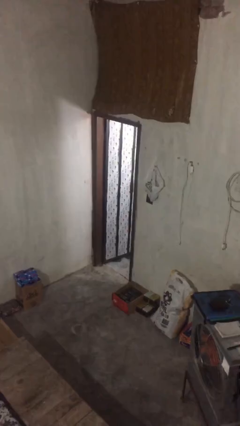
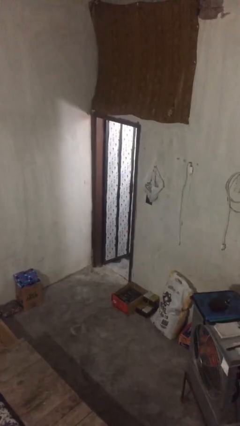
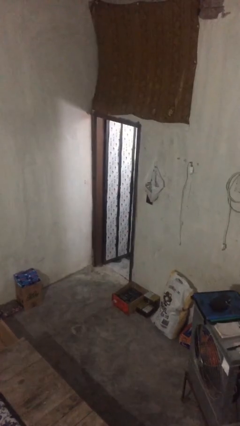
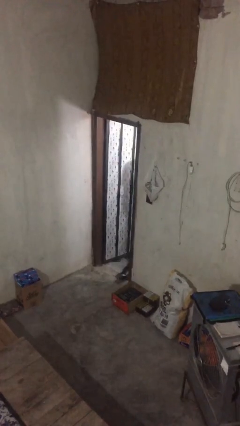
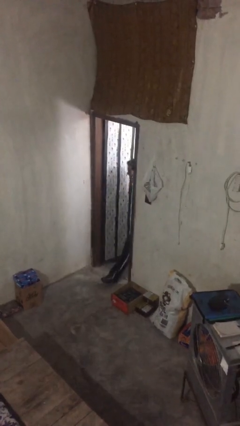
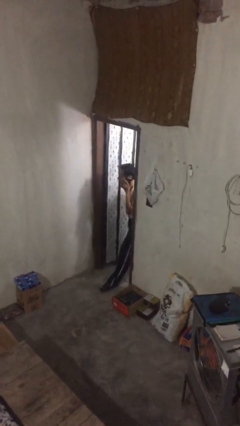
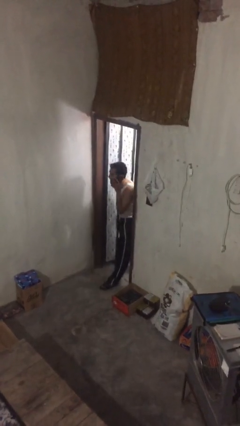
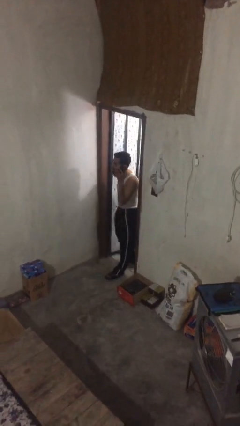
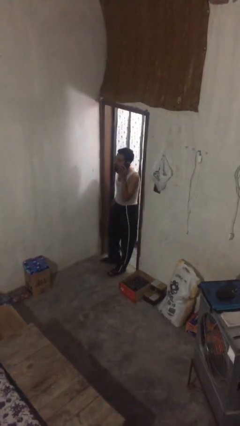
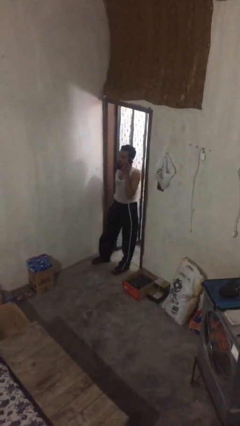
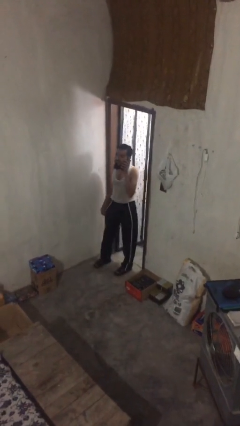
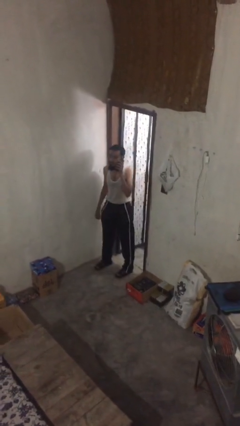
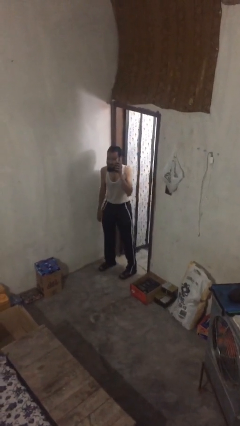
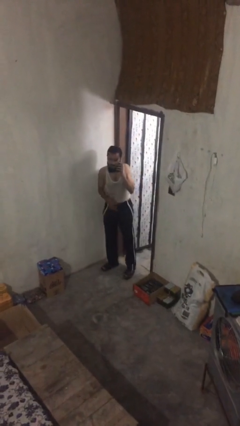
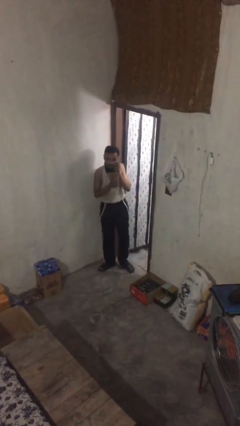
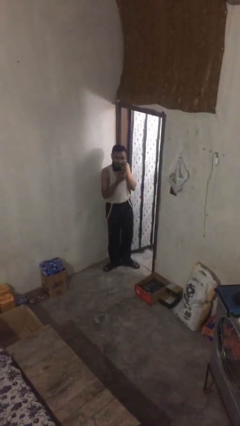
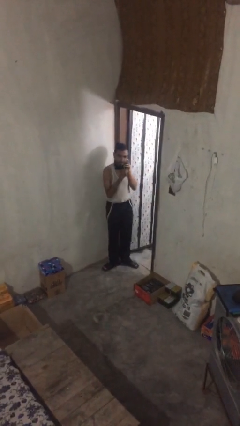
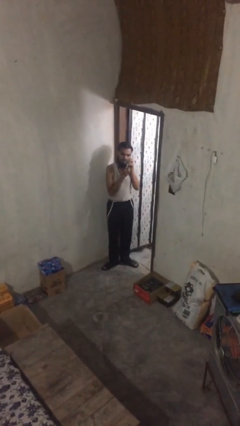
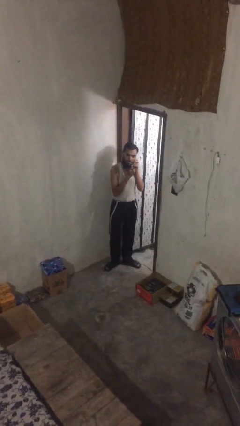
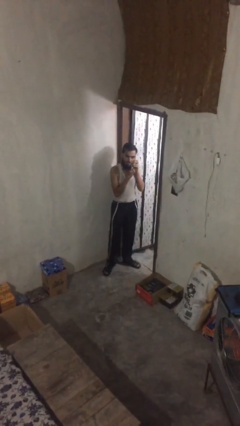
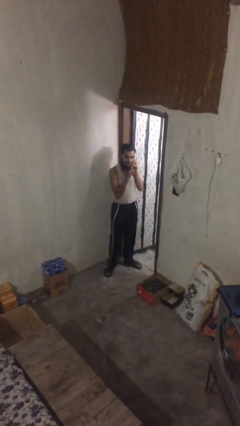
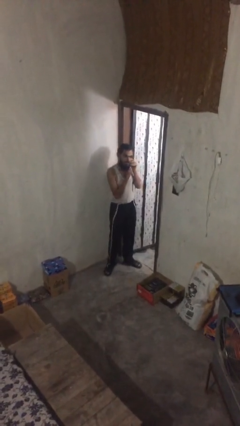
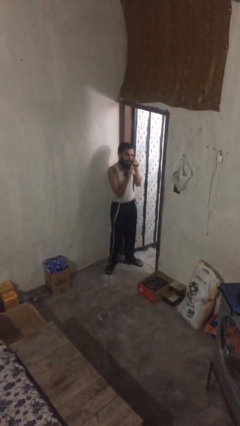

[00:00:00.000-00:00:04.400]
person enters scene through structure

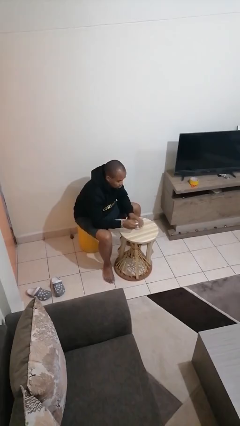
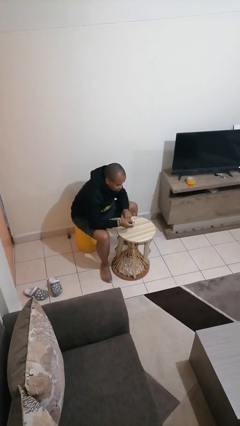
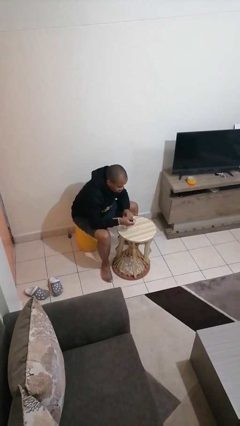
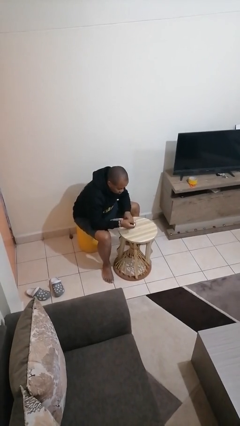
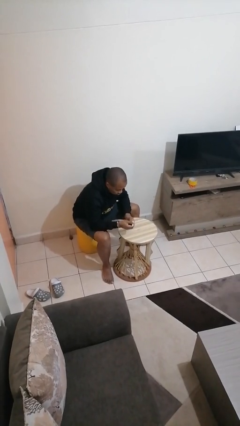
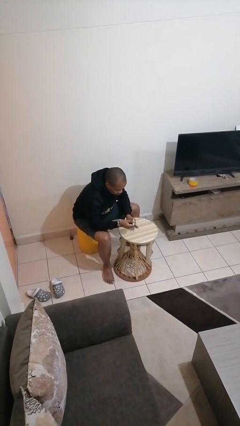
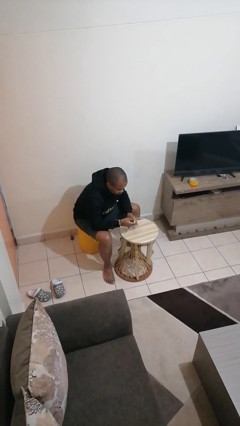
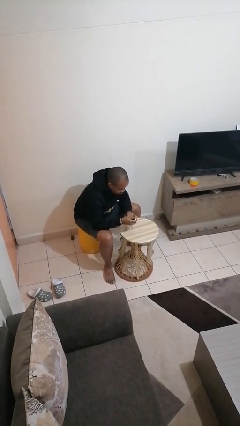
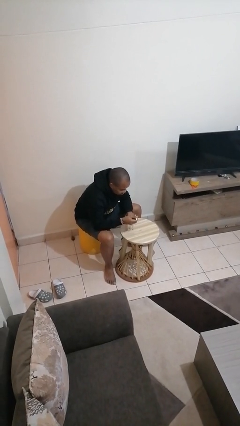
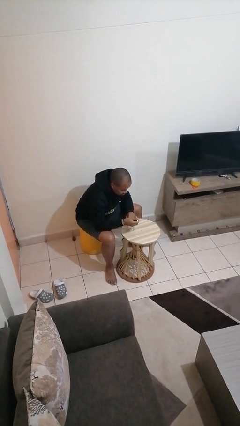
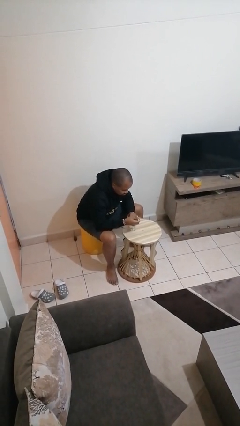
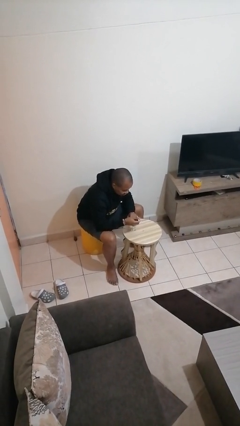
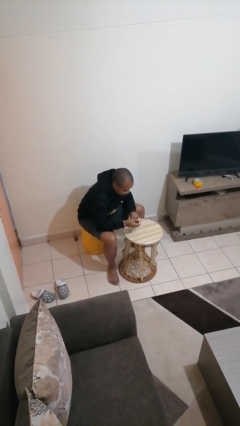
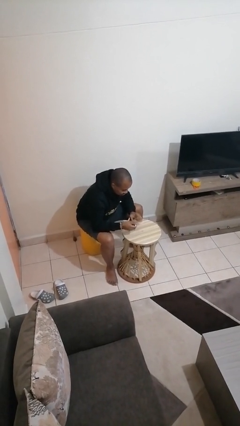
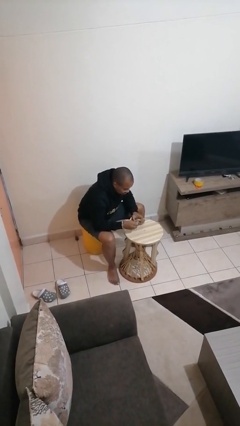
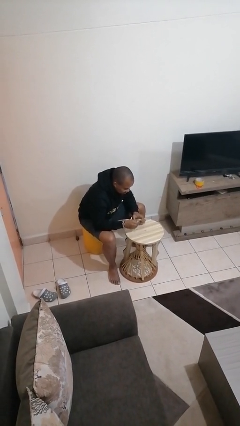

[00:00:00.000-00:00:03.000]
person paints fingernails

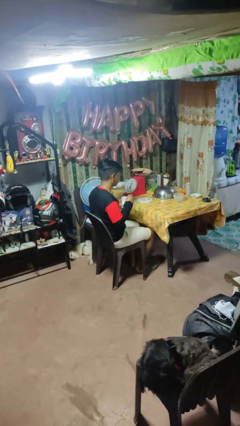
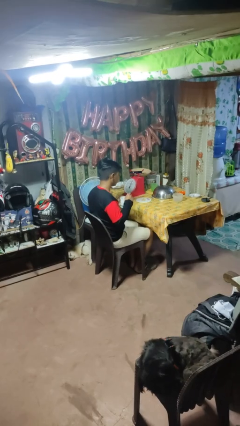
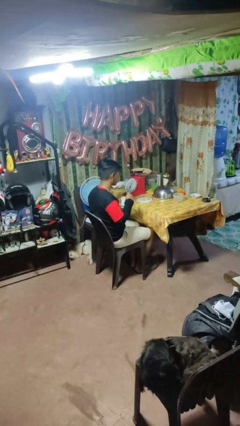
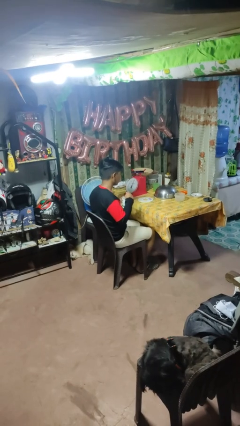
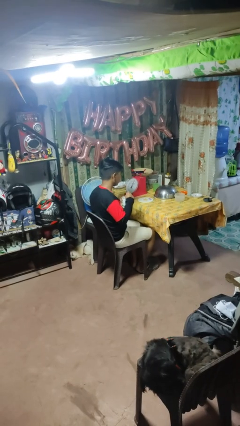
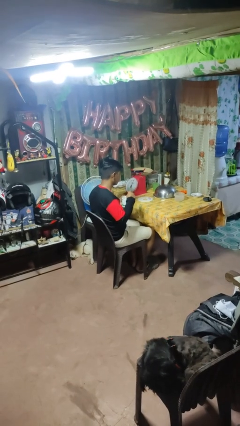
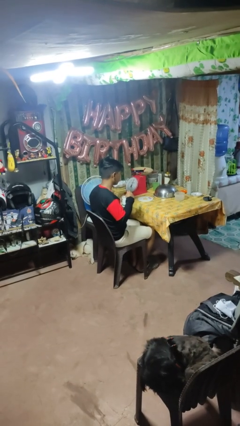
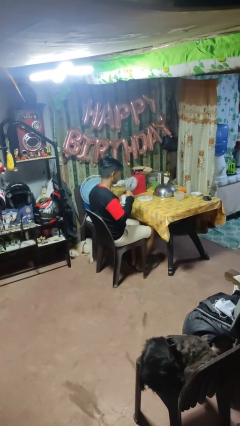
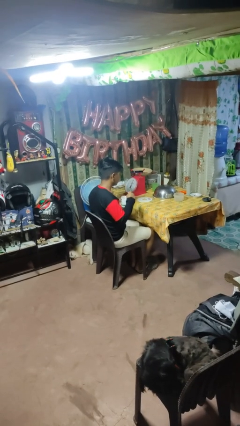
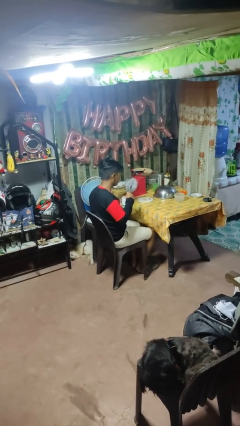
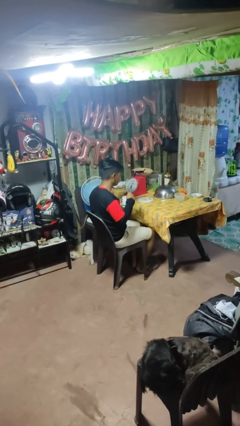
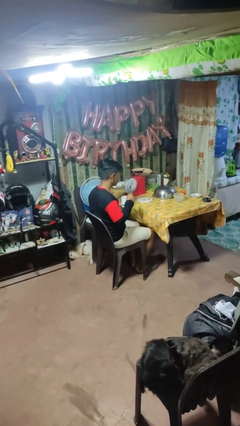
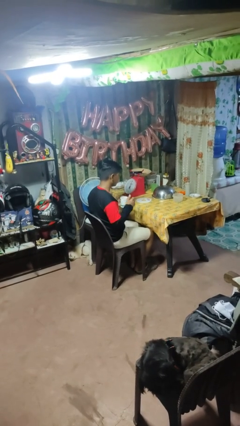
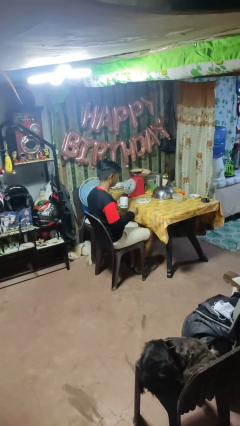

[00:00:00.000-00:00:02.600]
person stirs mug

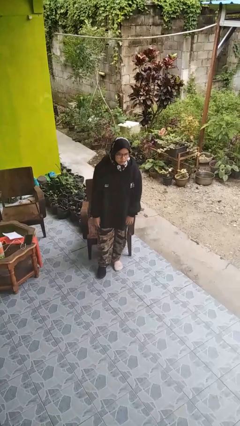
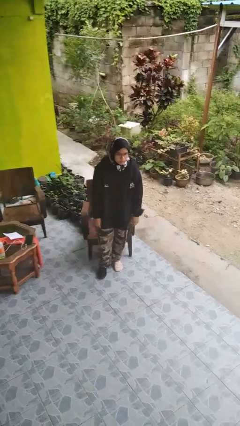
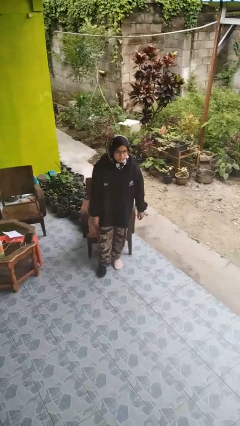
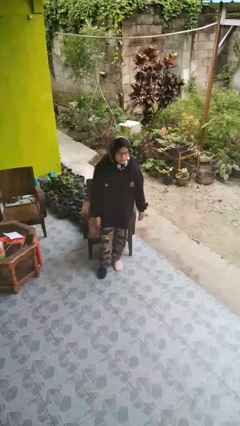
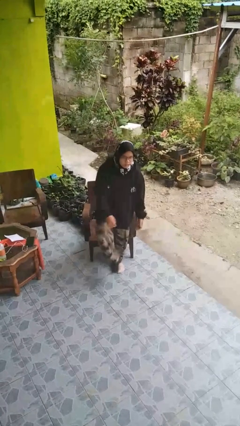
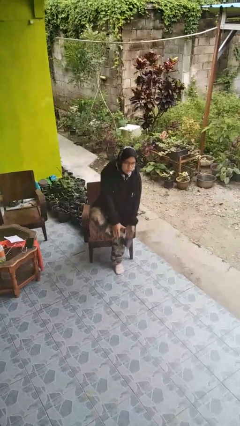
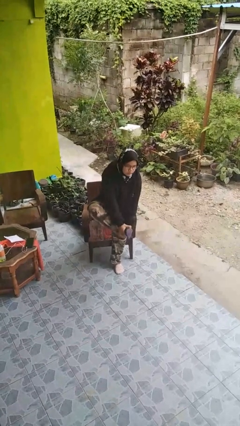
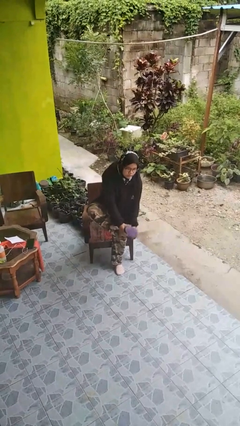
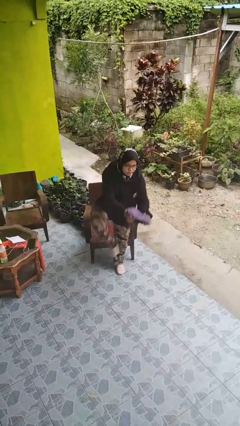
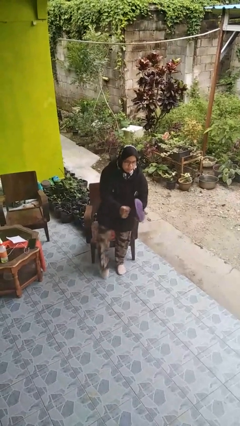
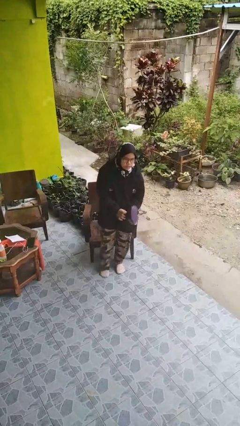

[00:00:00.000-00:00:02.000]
person takes off shoes

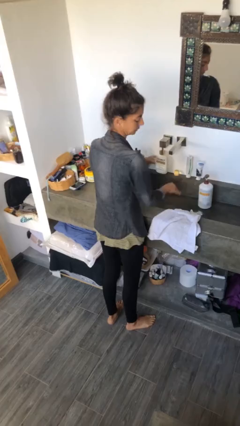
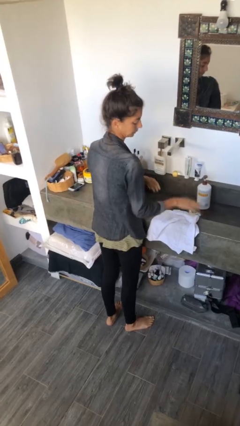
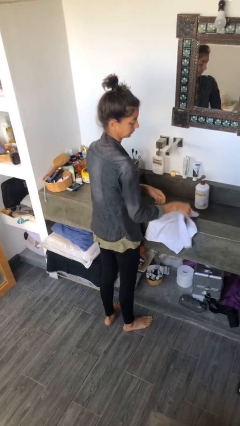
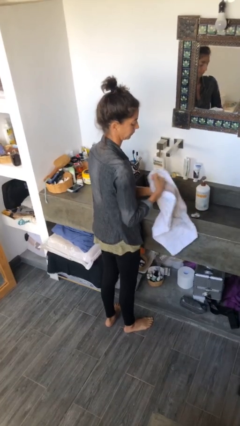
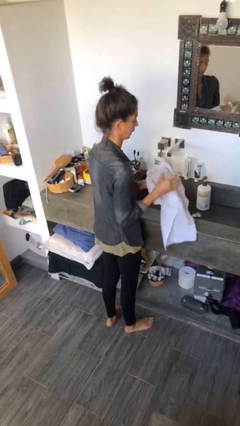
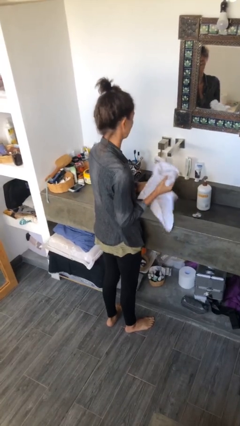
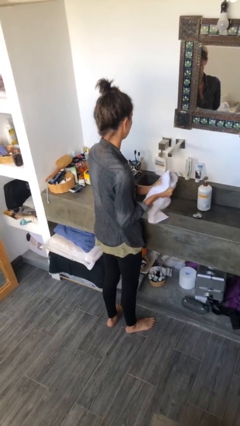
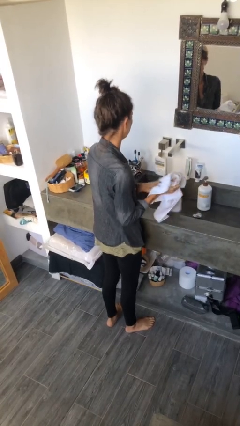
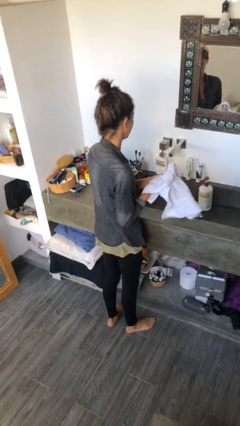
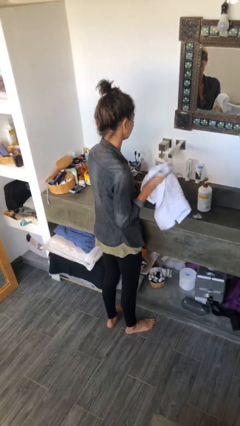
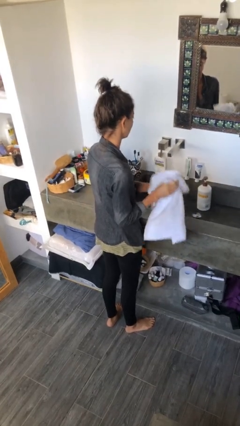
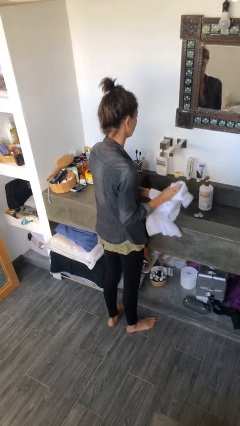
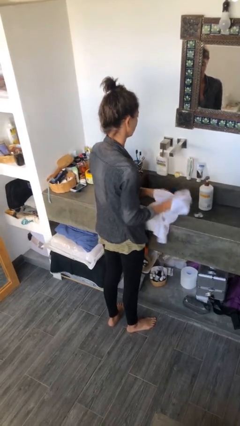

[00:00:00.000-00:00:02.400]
person dries hands with towel

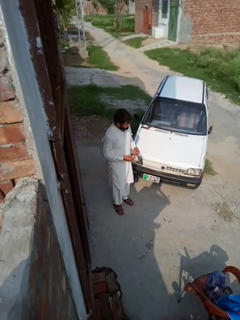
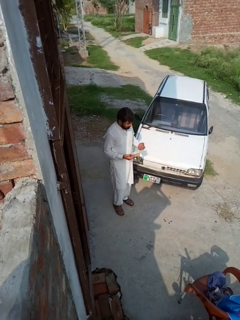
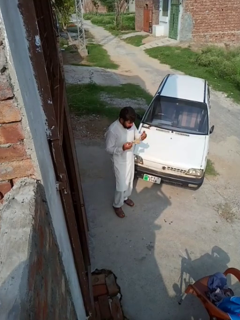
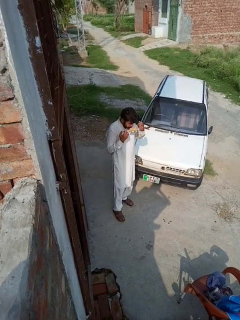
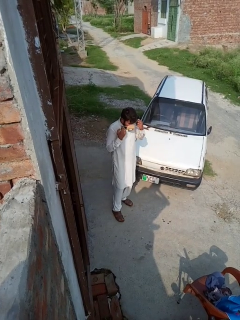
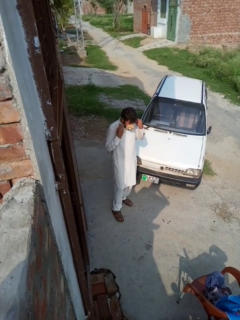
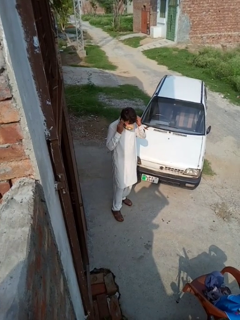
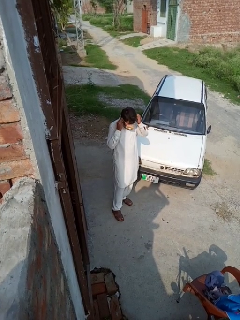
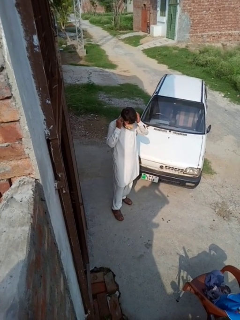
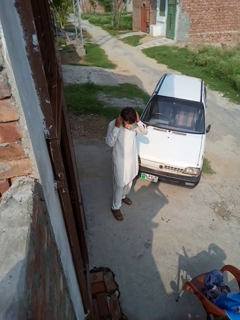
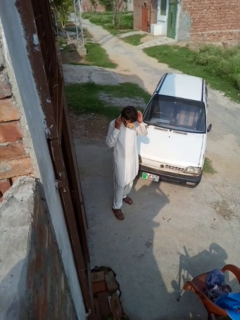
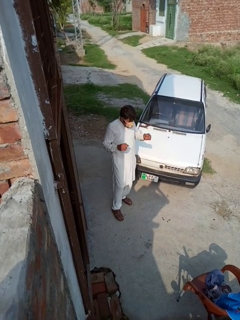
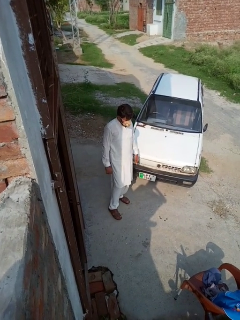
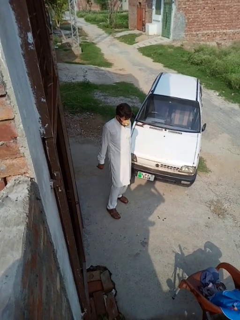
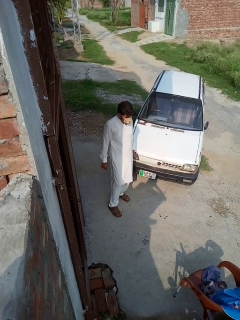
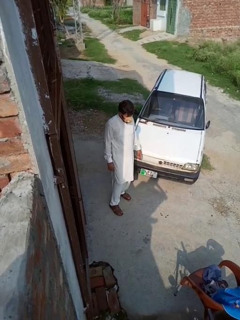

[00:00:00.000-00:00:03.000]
person puts on facemask
